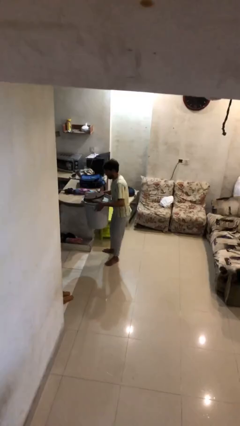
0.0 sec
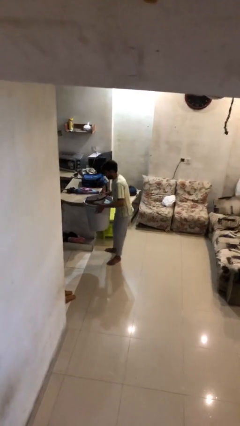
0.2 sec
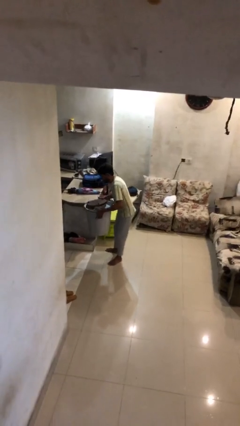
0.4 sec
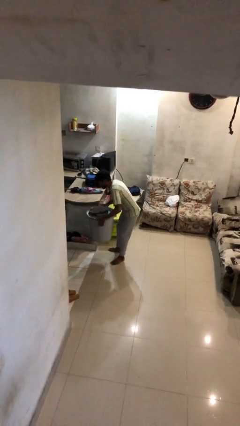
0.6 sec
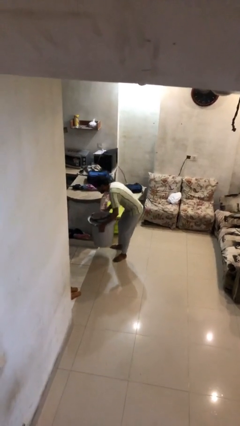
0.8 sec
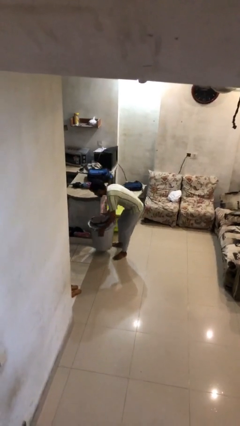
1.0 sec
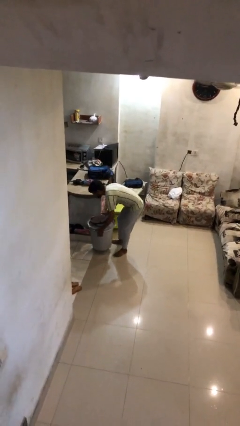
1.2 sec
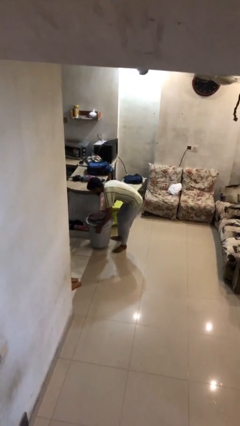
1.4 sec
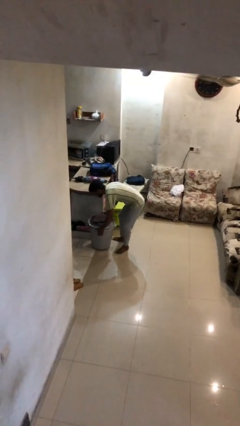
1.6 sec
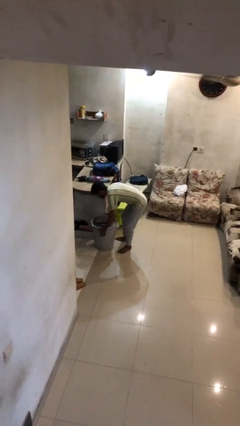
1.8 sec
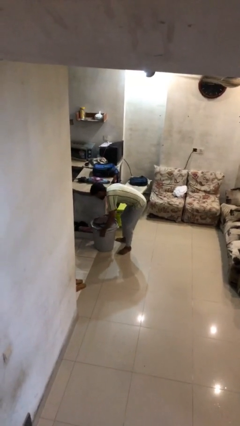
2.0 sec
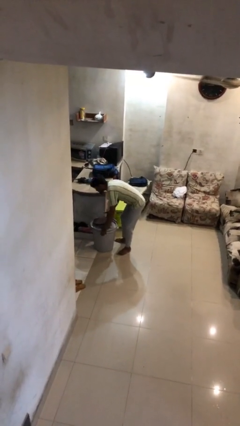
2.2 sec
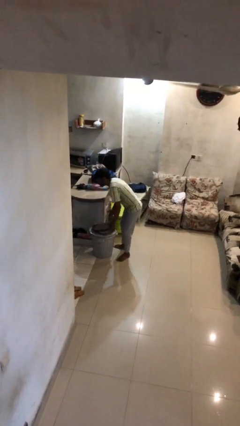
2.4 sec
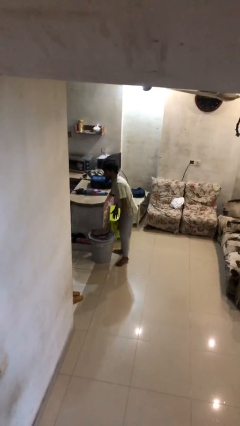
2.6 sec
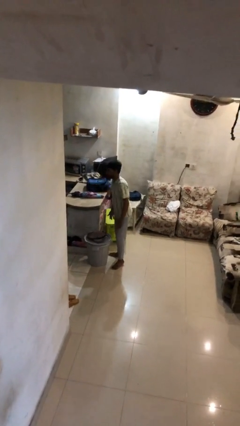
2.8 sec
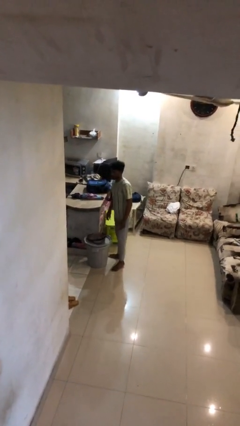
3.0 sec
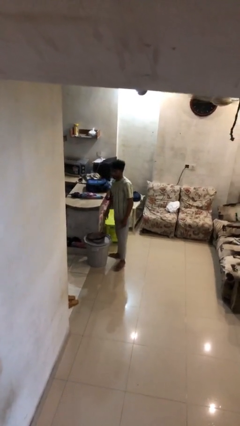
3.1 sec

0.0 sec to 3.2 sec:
person puts down object on floor

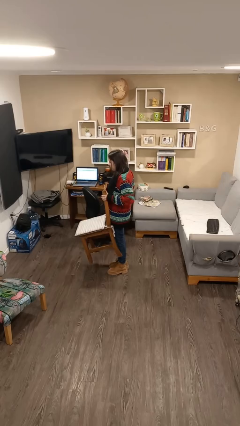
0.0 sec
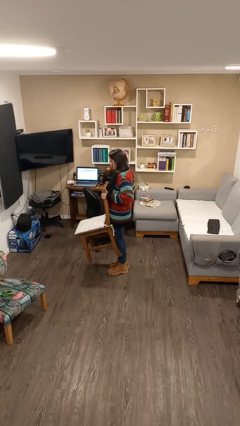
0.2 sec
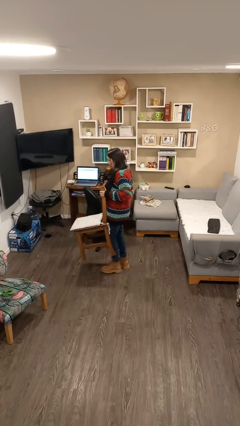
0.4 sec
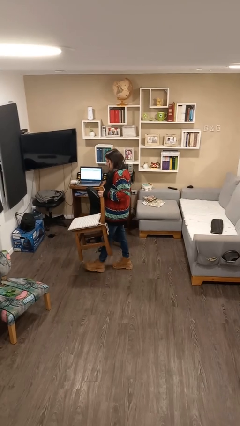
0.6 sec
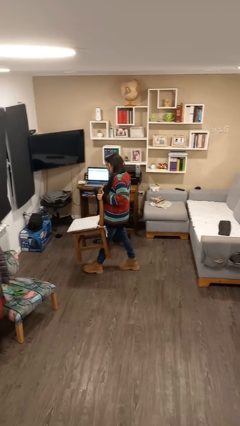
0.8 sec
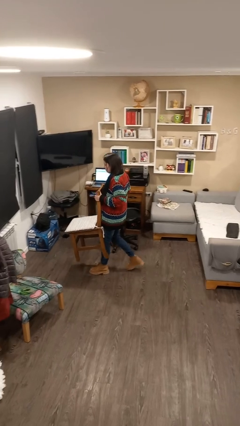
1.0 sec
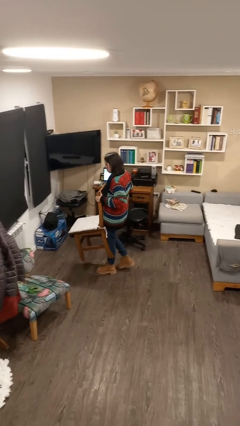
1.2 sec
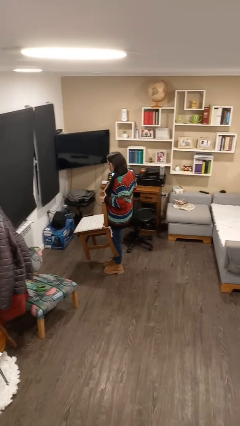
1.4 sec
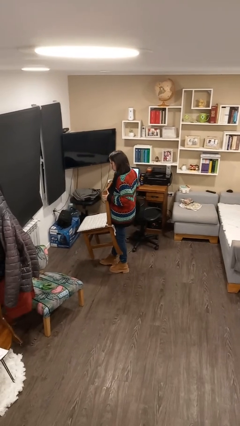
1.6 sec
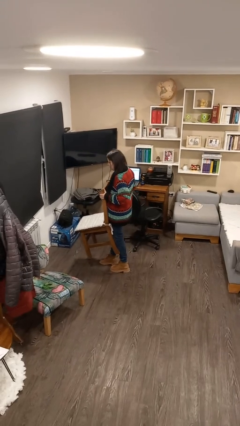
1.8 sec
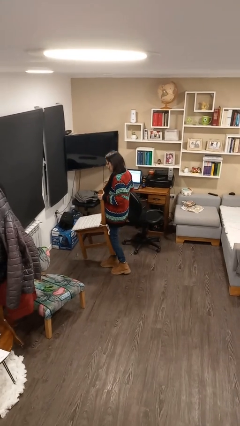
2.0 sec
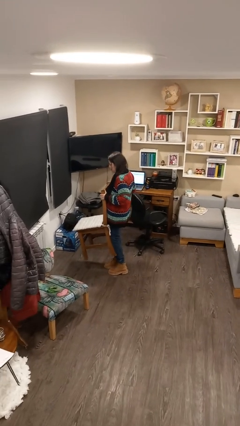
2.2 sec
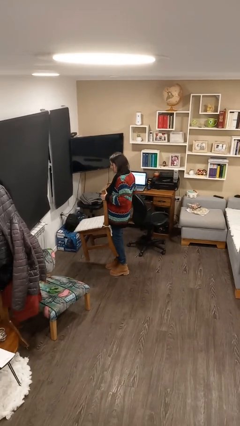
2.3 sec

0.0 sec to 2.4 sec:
person carries furniture

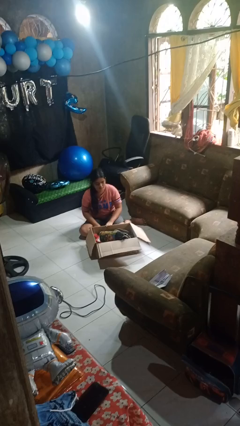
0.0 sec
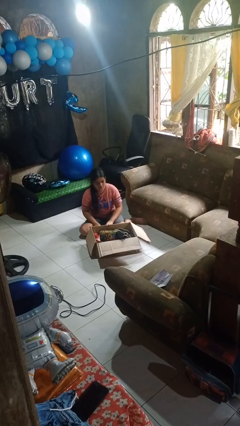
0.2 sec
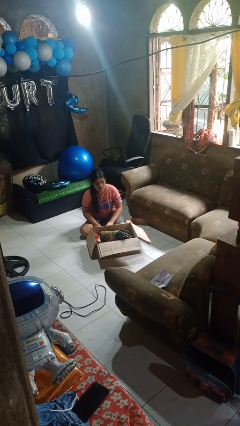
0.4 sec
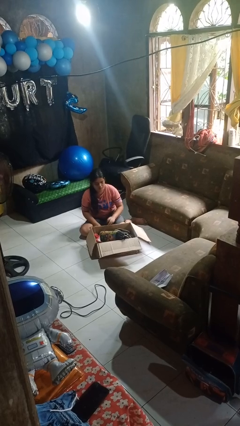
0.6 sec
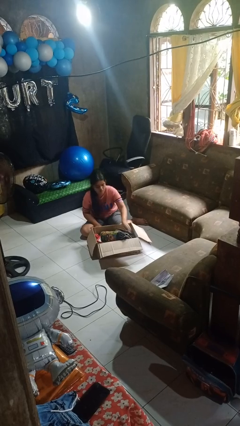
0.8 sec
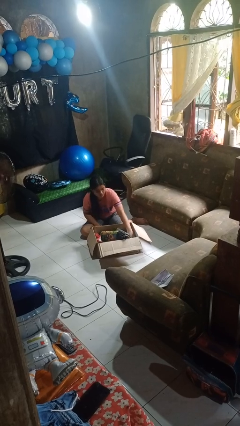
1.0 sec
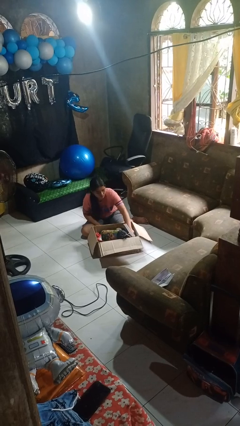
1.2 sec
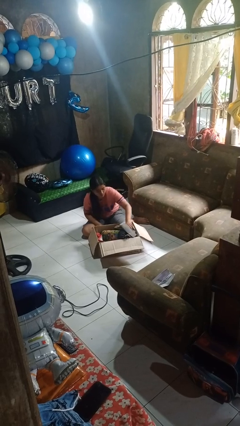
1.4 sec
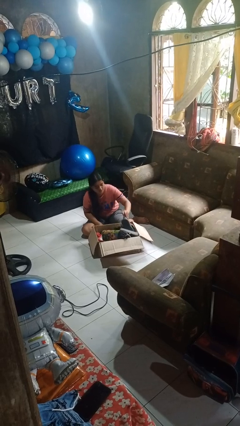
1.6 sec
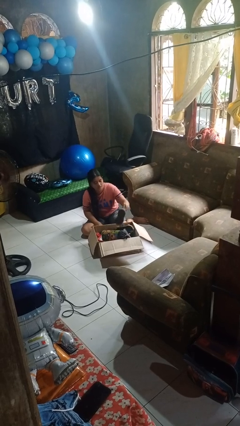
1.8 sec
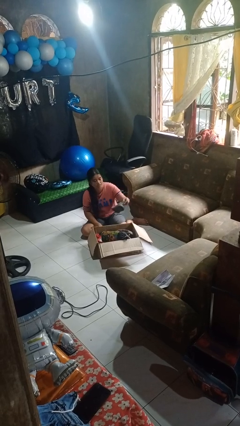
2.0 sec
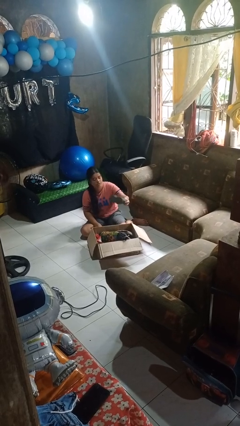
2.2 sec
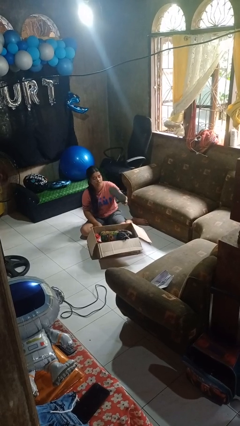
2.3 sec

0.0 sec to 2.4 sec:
person takes object from box

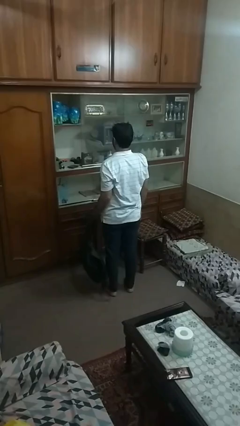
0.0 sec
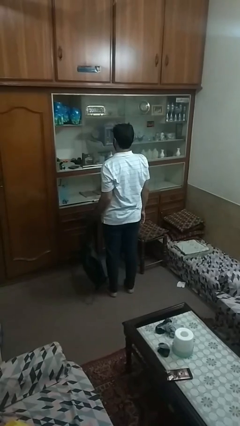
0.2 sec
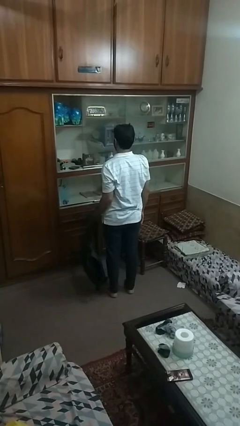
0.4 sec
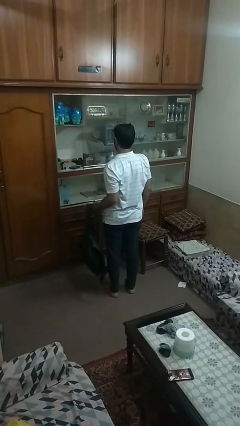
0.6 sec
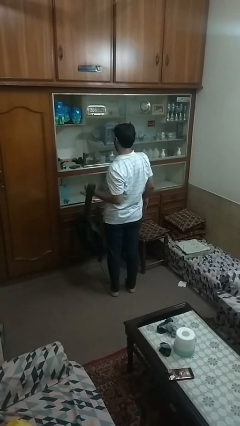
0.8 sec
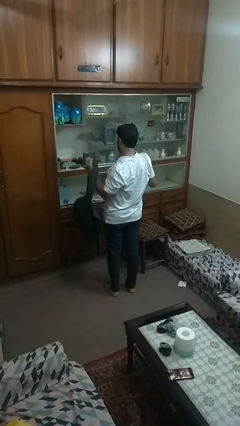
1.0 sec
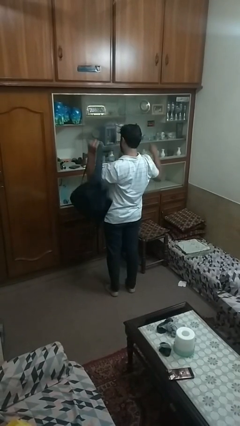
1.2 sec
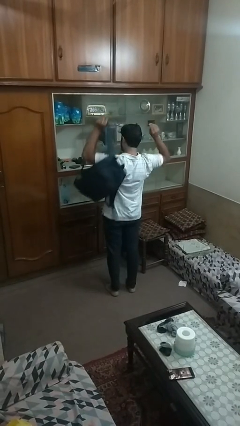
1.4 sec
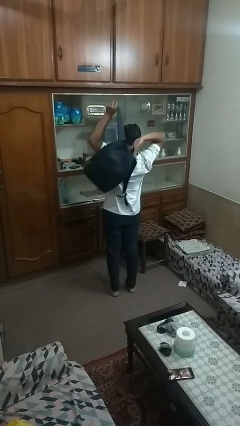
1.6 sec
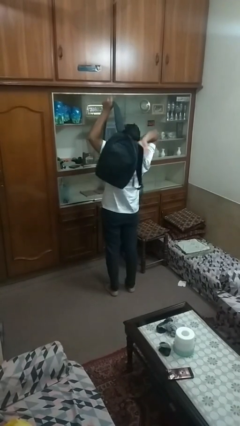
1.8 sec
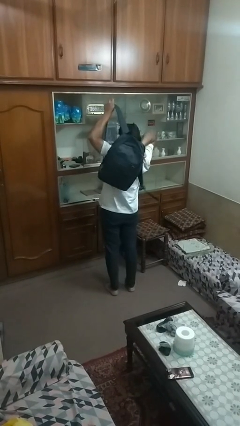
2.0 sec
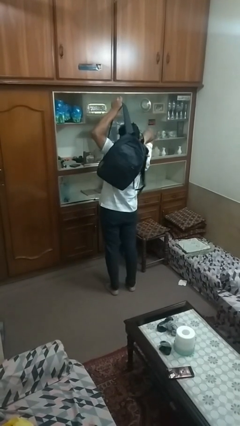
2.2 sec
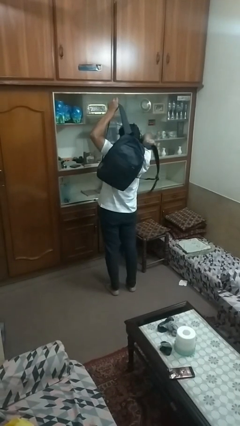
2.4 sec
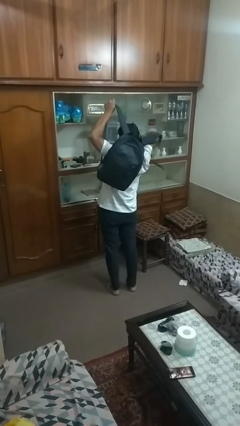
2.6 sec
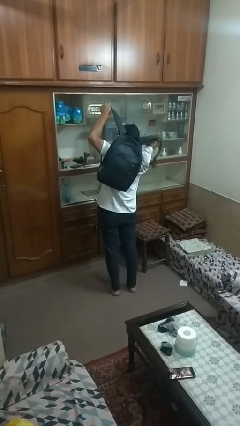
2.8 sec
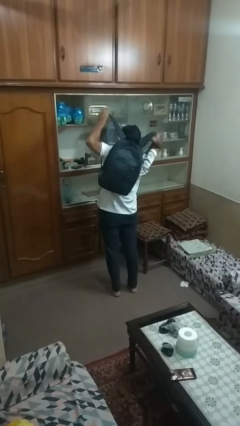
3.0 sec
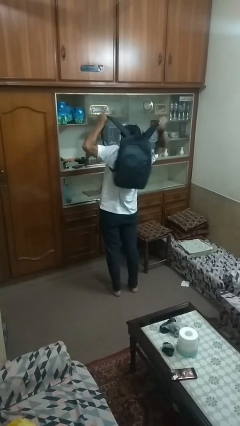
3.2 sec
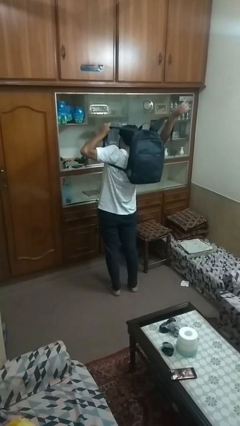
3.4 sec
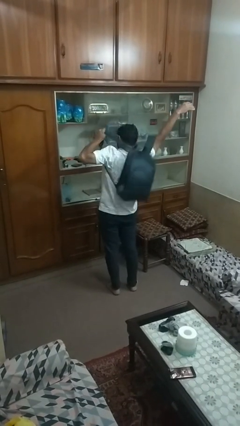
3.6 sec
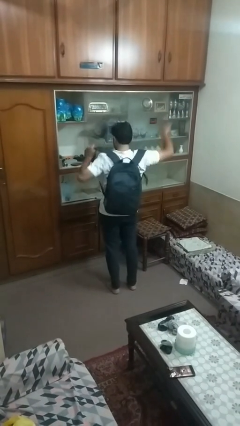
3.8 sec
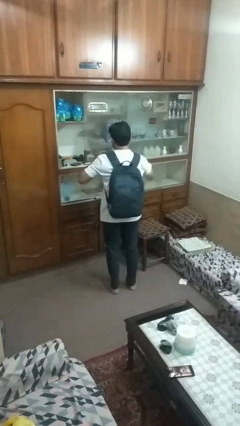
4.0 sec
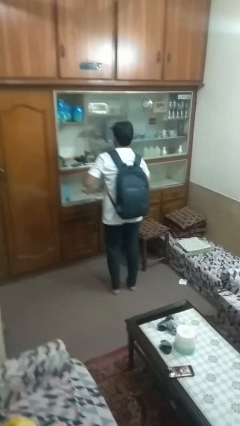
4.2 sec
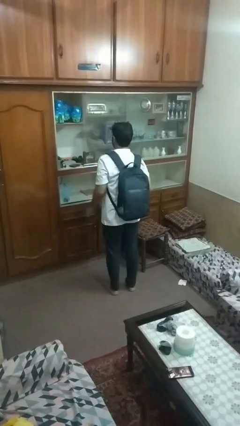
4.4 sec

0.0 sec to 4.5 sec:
person puts on backpack

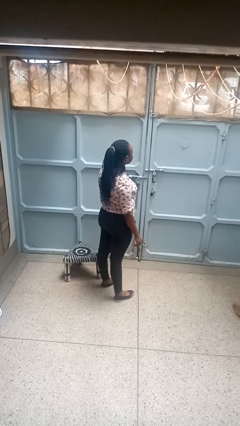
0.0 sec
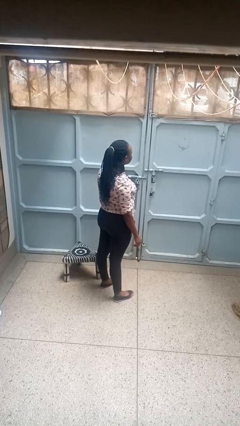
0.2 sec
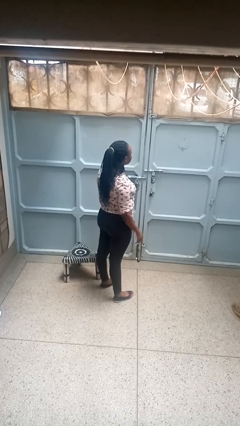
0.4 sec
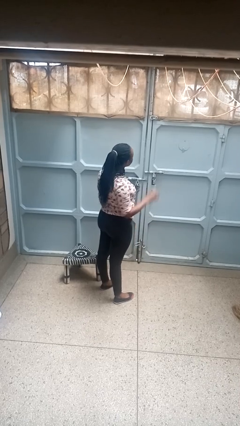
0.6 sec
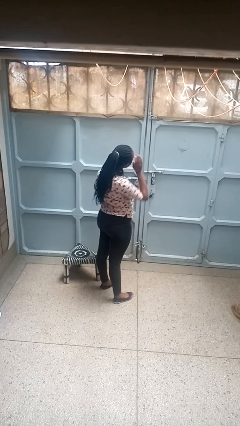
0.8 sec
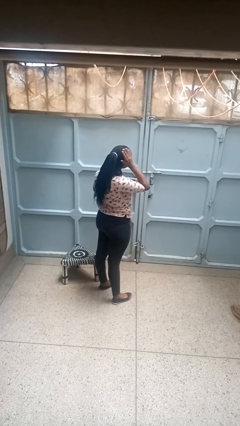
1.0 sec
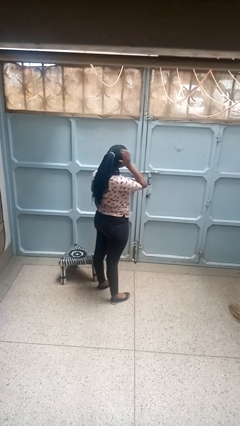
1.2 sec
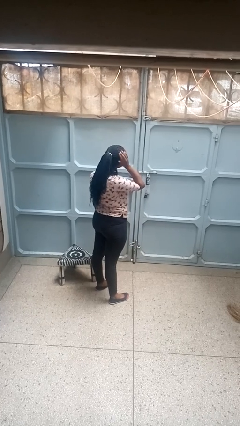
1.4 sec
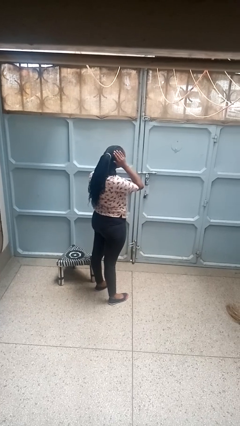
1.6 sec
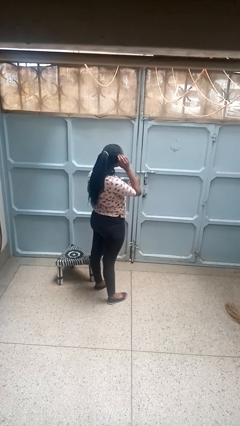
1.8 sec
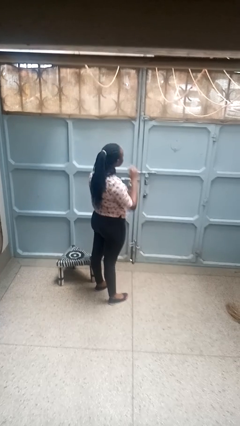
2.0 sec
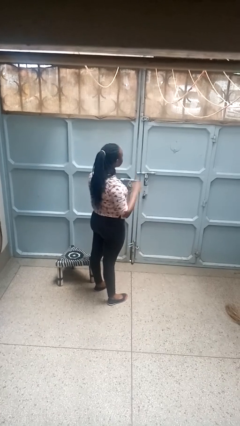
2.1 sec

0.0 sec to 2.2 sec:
person pats head

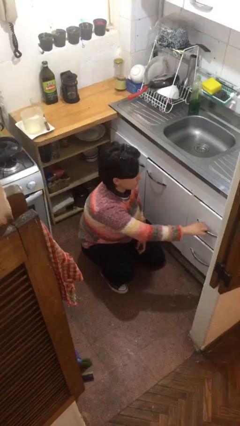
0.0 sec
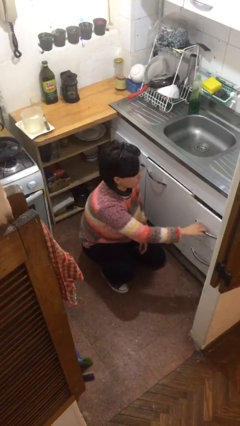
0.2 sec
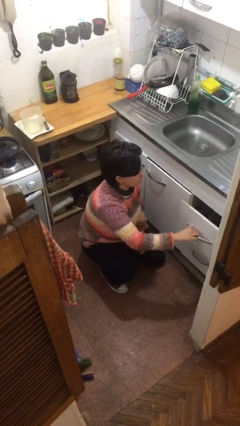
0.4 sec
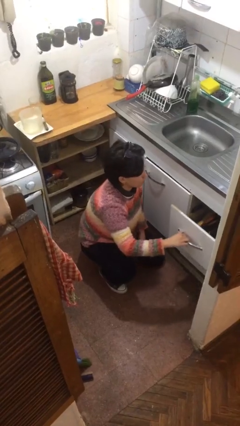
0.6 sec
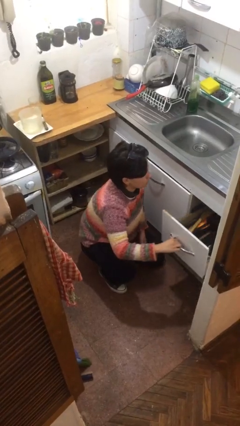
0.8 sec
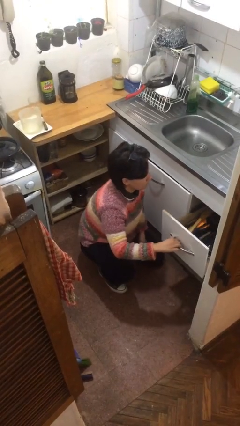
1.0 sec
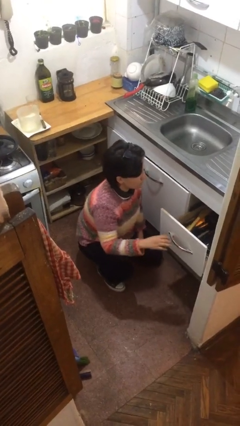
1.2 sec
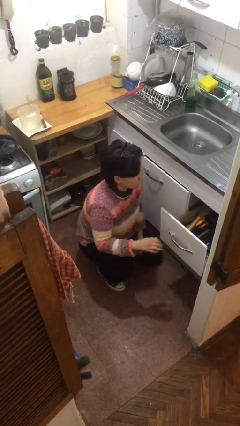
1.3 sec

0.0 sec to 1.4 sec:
person opens kitchen drawer

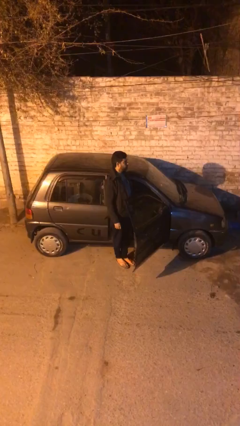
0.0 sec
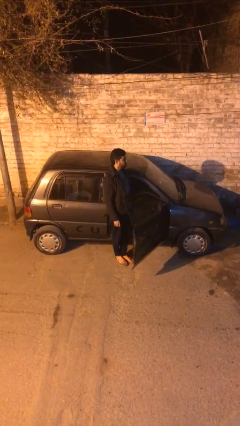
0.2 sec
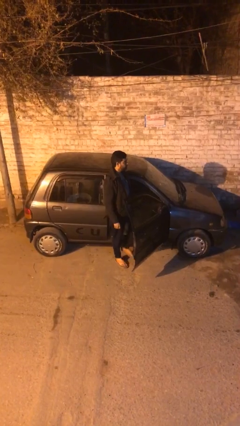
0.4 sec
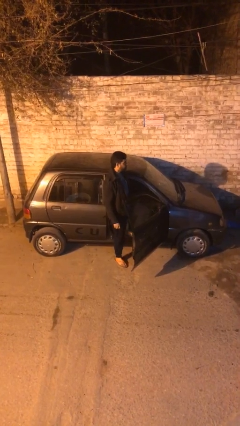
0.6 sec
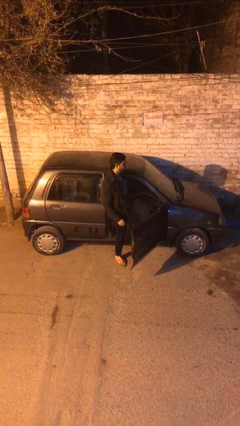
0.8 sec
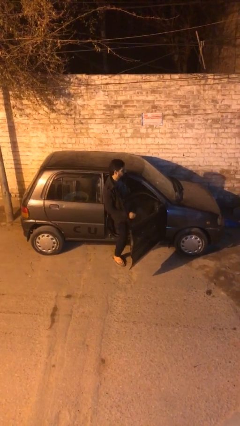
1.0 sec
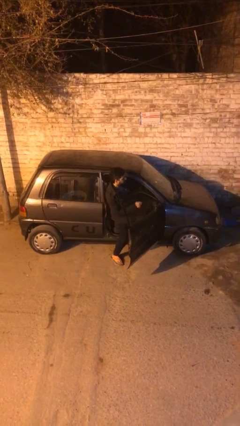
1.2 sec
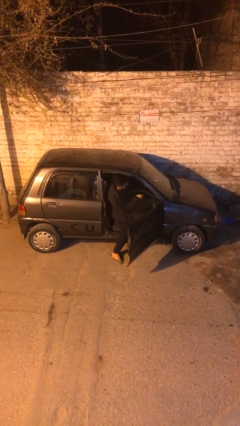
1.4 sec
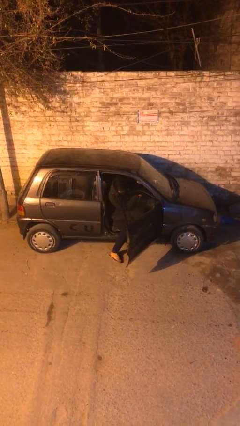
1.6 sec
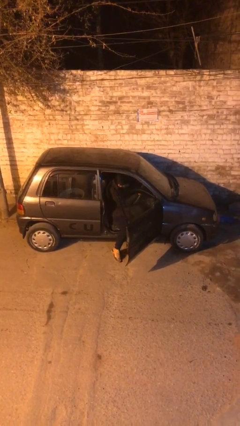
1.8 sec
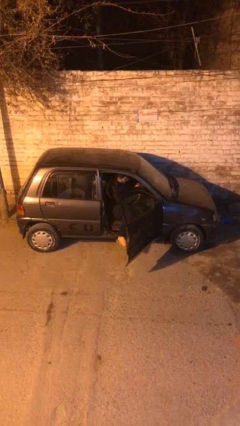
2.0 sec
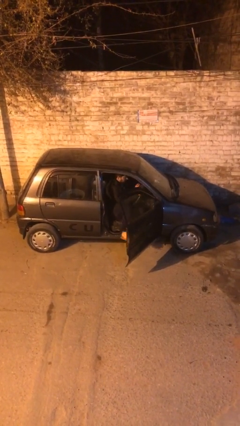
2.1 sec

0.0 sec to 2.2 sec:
person enters car
